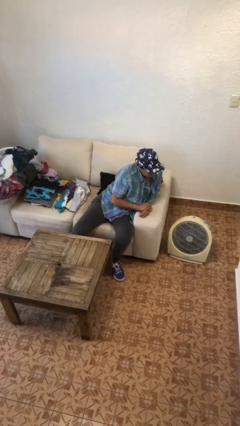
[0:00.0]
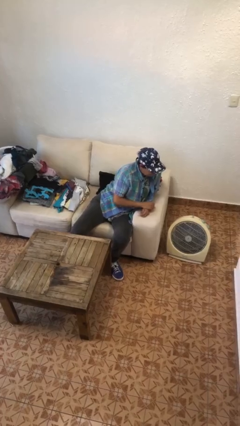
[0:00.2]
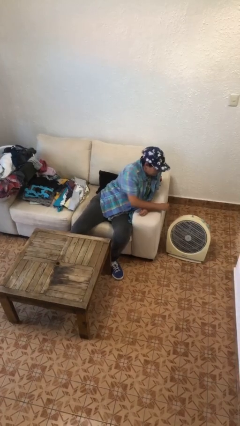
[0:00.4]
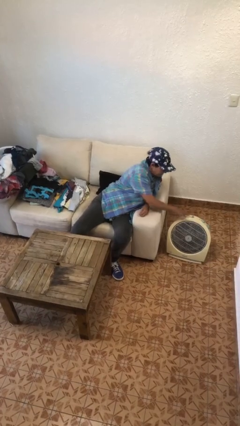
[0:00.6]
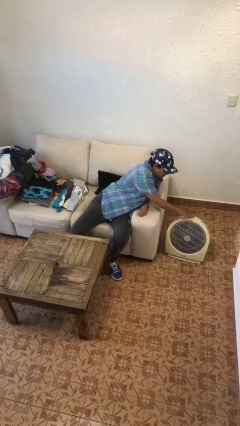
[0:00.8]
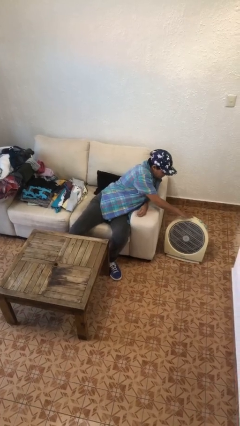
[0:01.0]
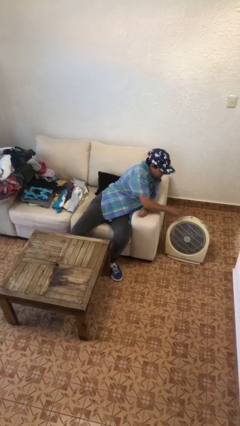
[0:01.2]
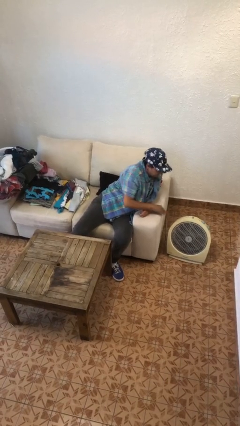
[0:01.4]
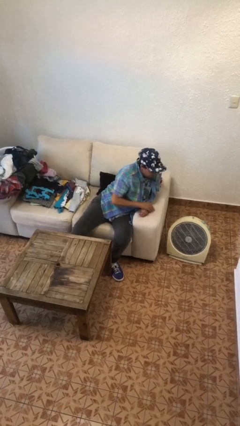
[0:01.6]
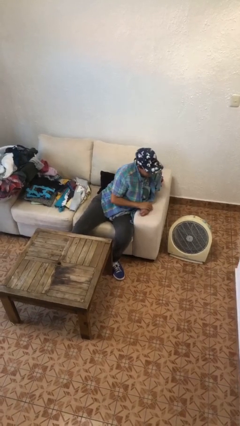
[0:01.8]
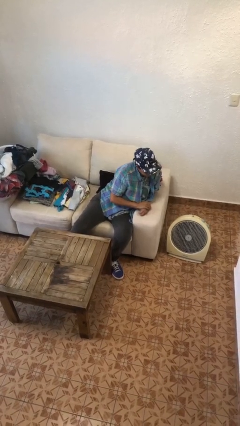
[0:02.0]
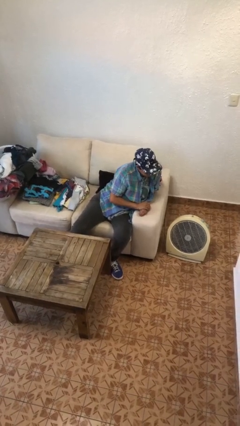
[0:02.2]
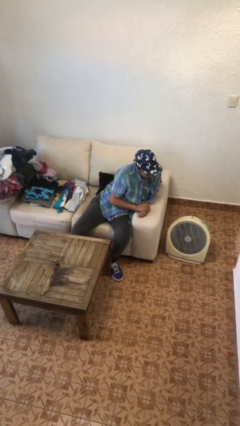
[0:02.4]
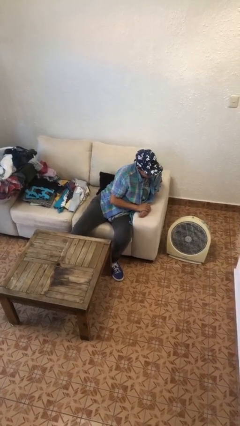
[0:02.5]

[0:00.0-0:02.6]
person turns on fan

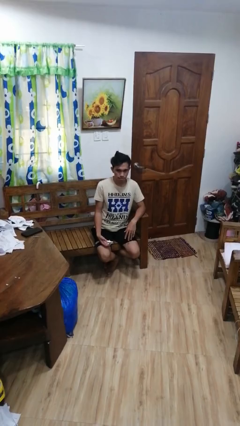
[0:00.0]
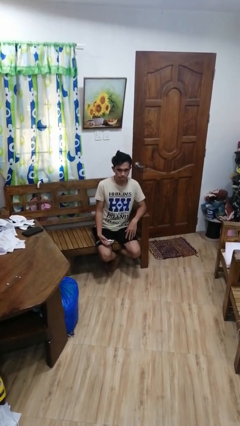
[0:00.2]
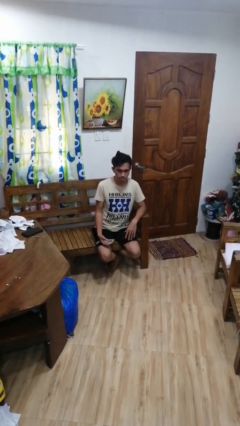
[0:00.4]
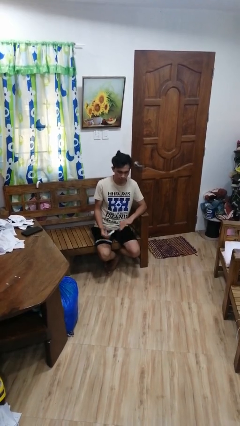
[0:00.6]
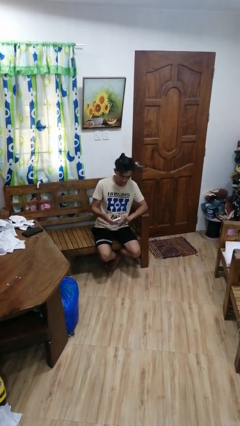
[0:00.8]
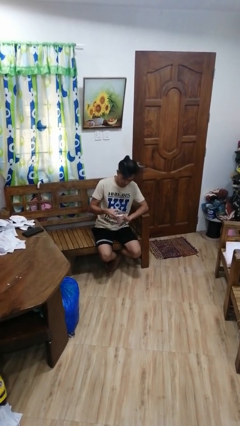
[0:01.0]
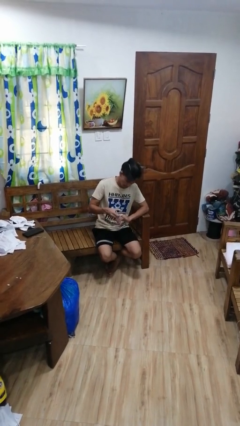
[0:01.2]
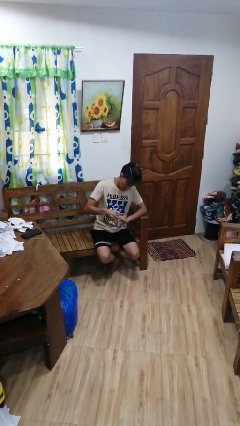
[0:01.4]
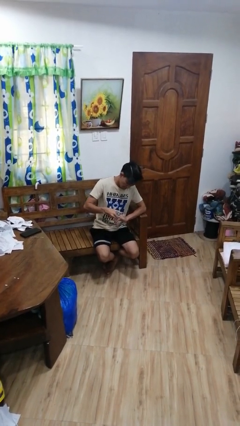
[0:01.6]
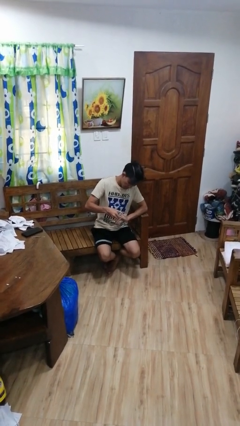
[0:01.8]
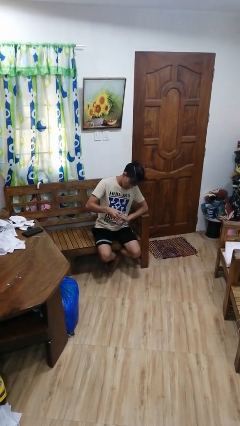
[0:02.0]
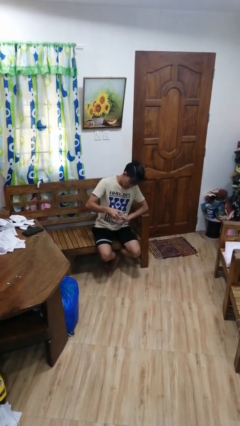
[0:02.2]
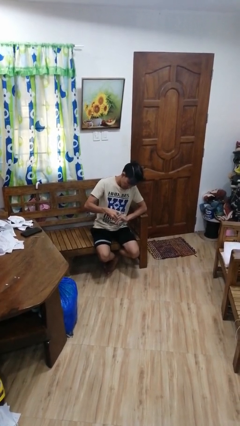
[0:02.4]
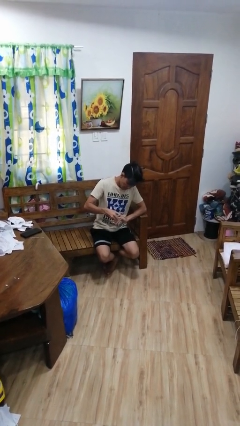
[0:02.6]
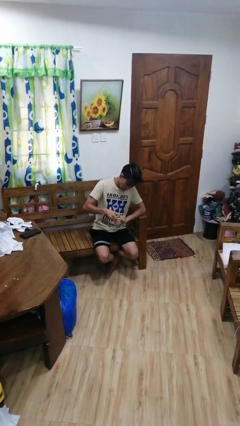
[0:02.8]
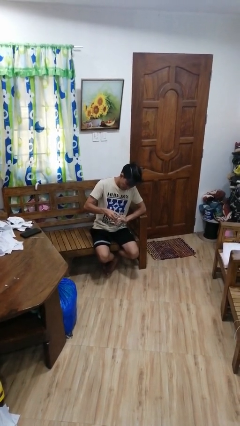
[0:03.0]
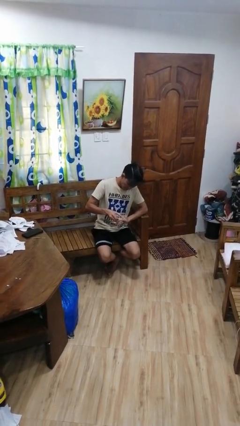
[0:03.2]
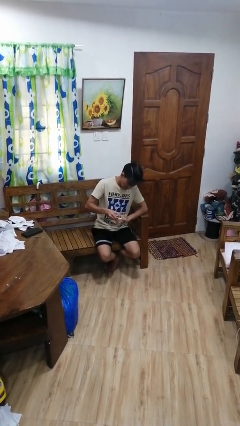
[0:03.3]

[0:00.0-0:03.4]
person clips fingernails

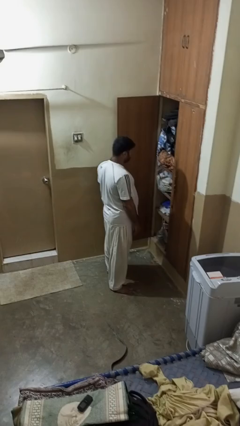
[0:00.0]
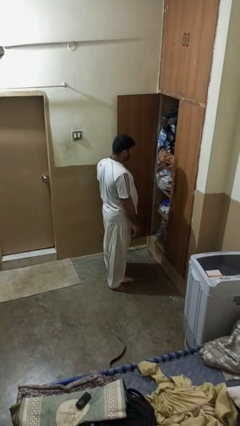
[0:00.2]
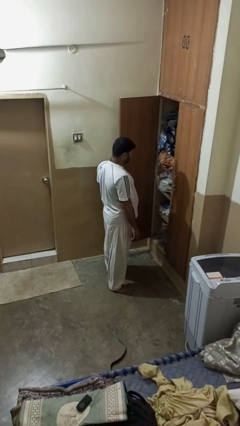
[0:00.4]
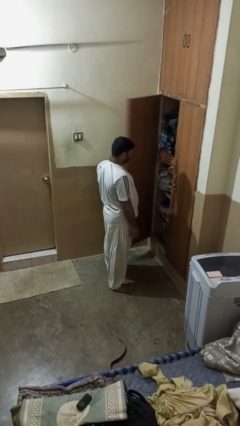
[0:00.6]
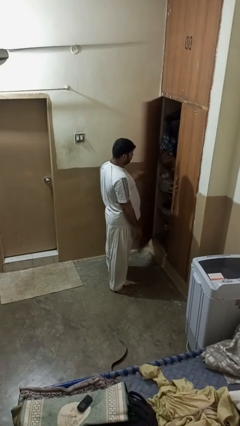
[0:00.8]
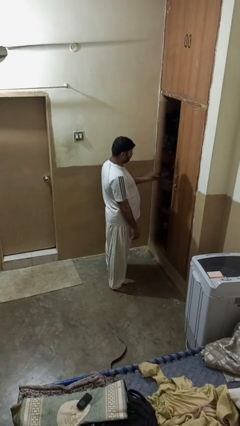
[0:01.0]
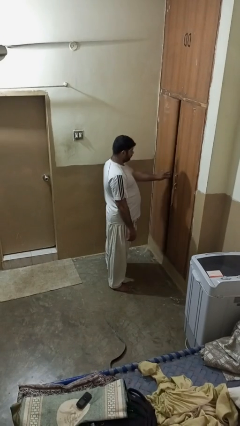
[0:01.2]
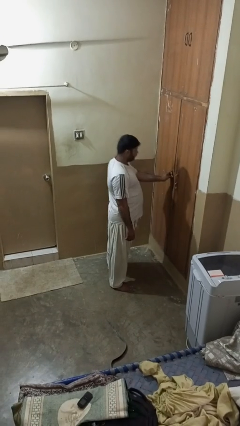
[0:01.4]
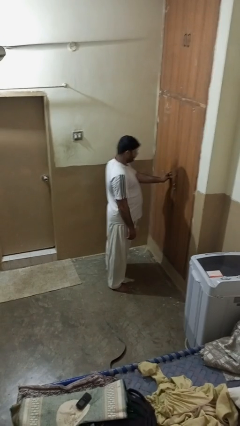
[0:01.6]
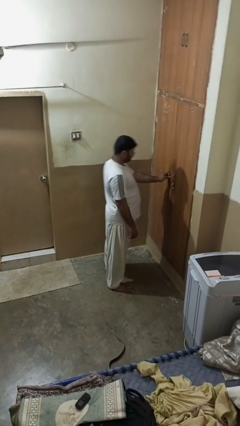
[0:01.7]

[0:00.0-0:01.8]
person closes closet door

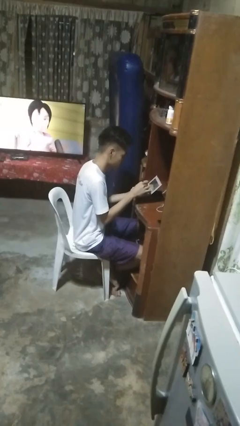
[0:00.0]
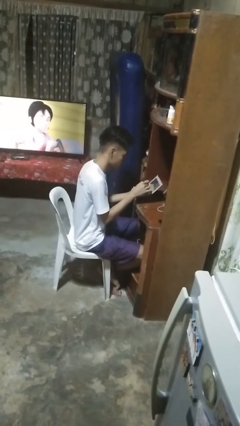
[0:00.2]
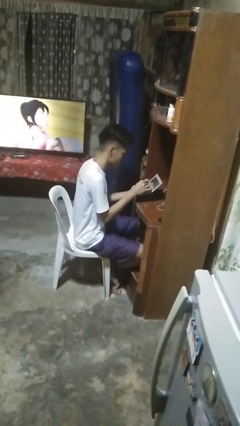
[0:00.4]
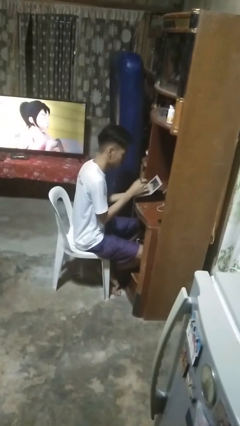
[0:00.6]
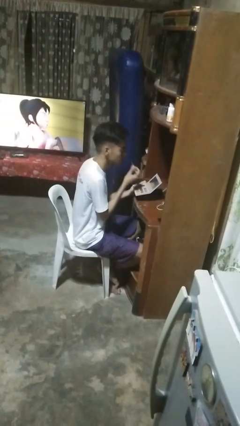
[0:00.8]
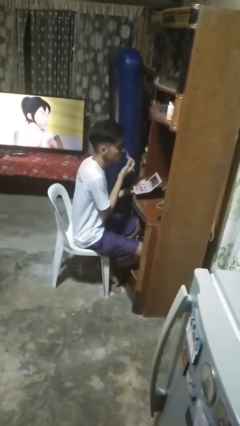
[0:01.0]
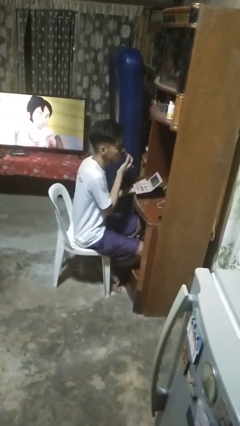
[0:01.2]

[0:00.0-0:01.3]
person applies eye makeup

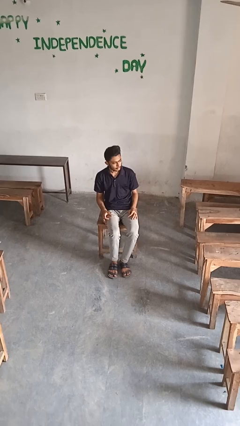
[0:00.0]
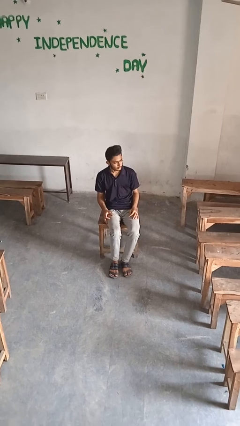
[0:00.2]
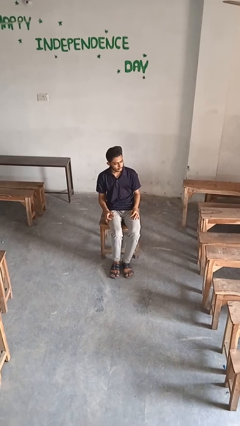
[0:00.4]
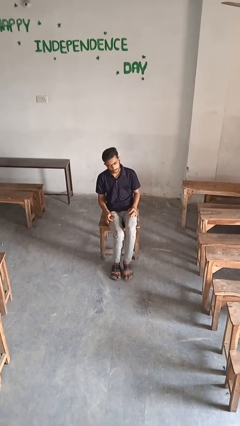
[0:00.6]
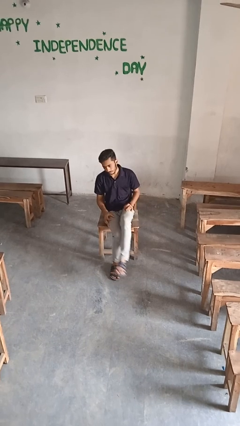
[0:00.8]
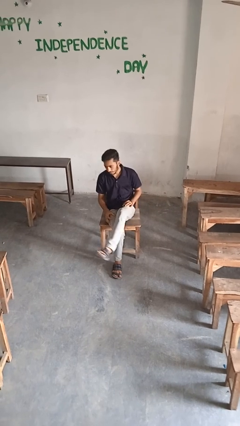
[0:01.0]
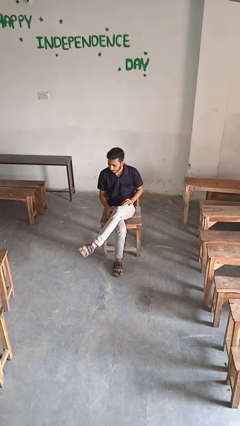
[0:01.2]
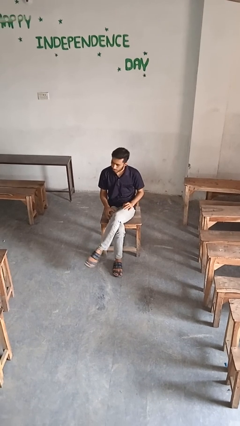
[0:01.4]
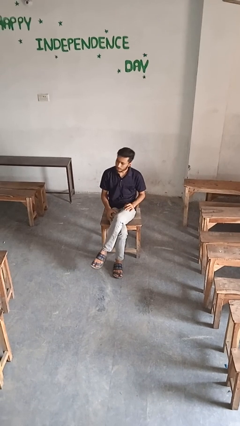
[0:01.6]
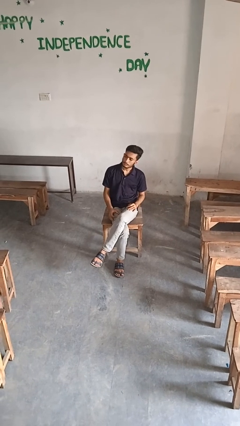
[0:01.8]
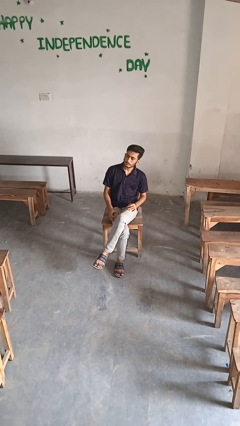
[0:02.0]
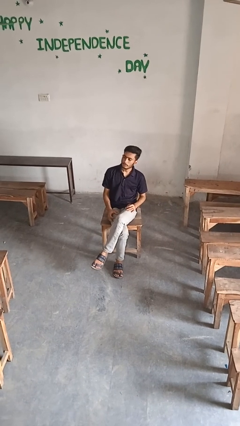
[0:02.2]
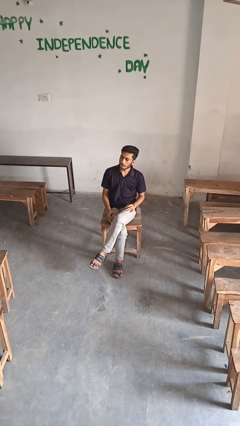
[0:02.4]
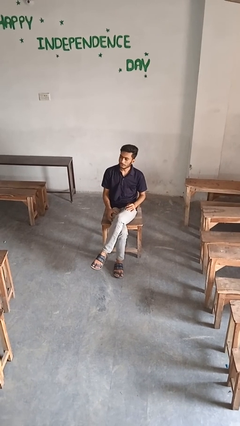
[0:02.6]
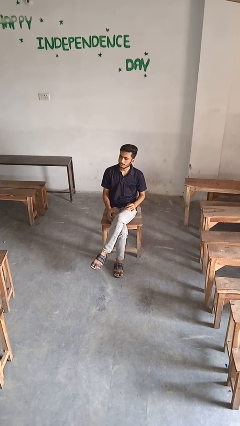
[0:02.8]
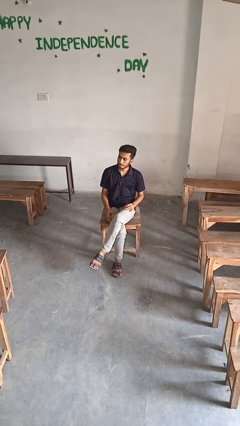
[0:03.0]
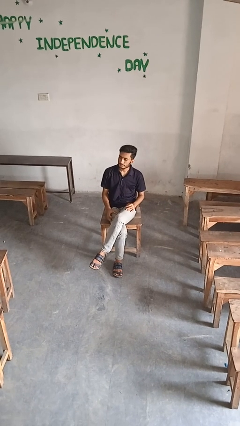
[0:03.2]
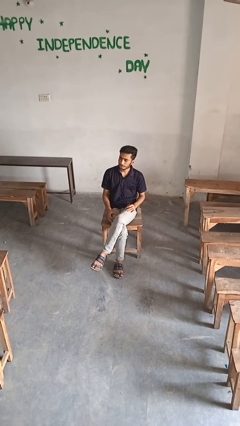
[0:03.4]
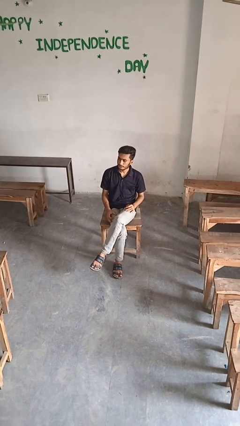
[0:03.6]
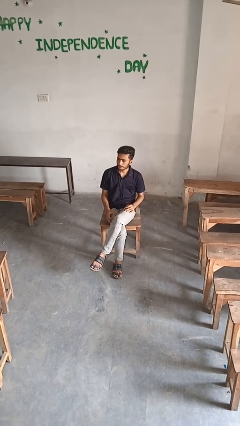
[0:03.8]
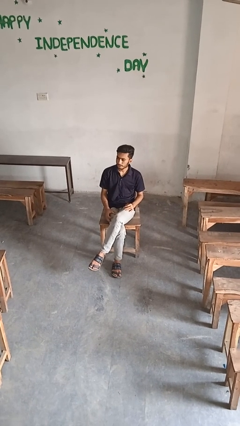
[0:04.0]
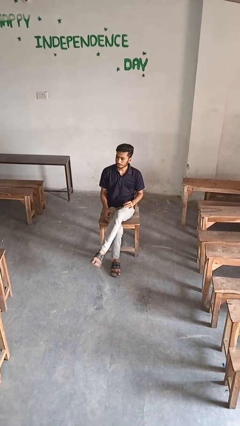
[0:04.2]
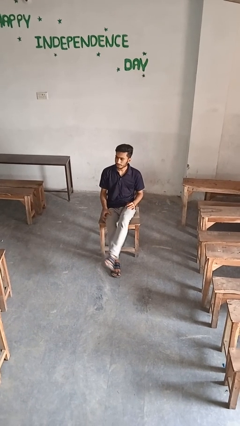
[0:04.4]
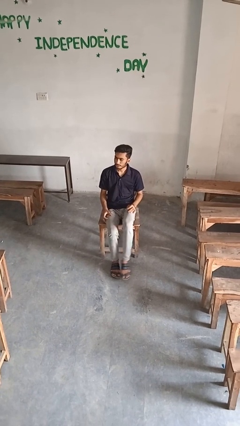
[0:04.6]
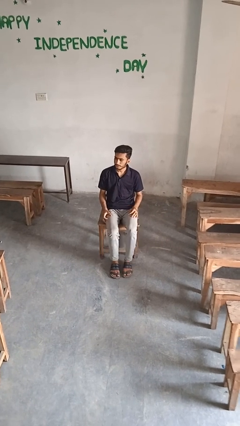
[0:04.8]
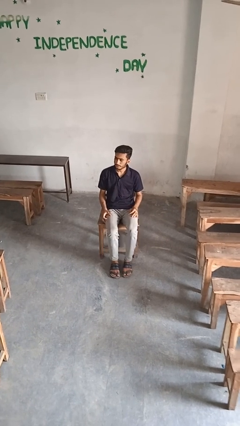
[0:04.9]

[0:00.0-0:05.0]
person crosses legs

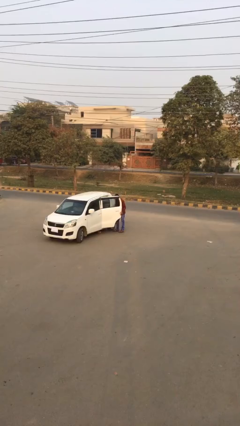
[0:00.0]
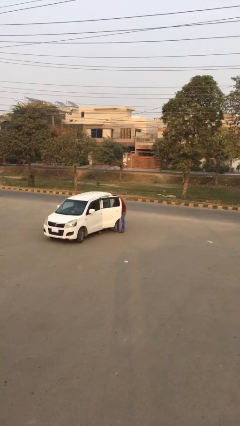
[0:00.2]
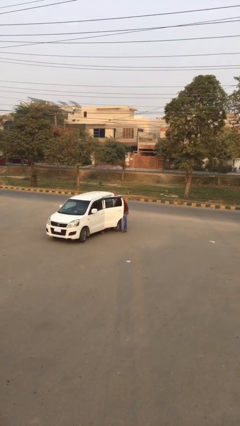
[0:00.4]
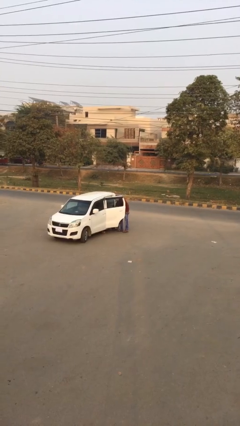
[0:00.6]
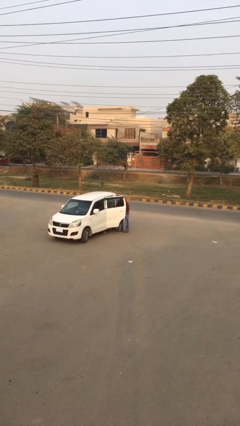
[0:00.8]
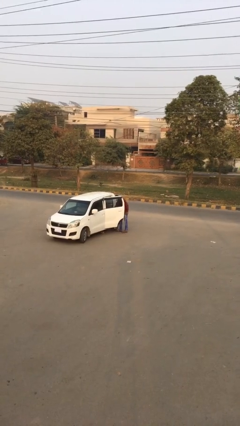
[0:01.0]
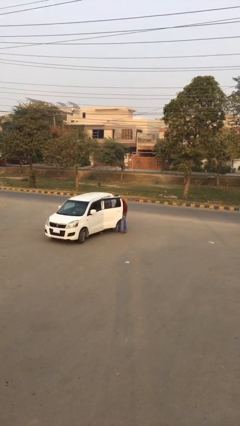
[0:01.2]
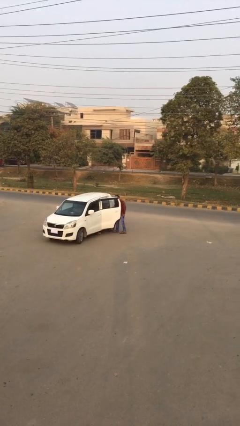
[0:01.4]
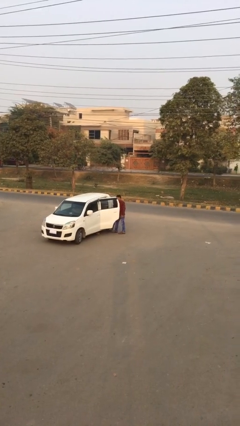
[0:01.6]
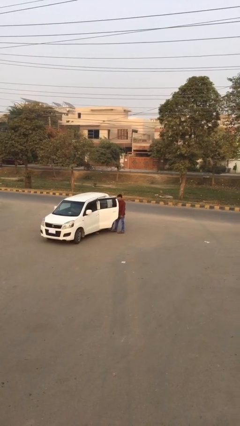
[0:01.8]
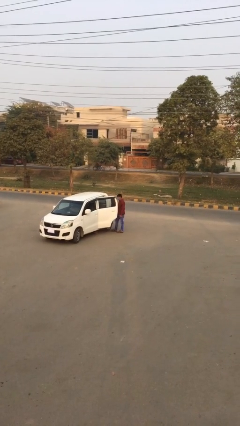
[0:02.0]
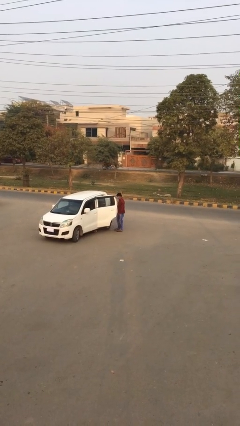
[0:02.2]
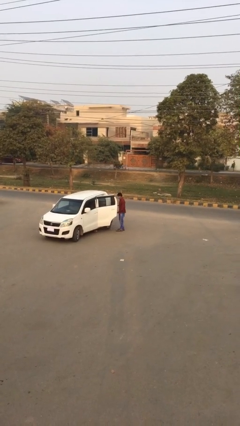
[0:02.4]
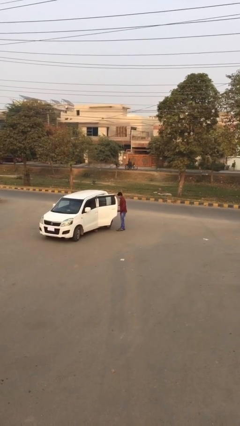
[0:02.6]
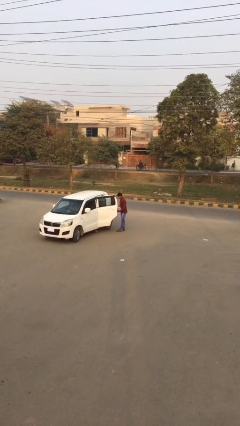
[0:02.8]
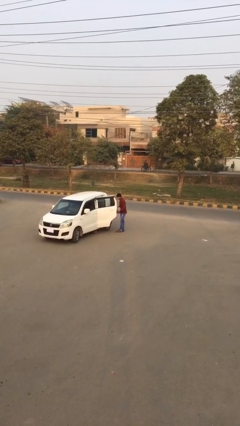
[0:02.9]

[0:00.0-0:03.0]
person unloads car

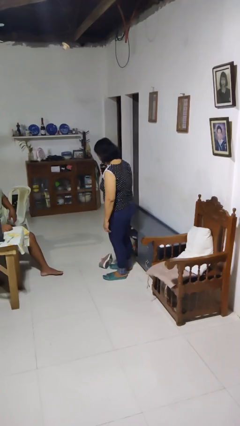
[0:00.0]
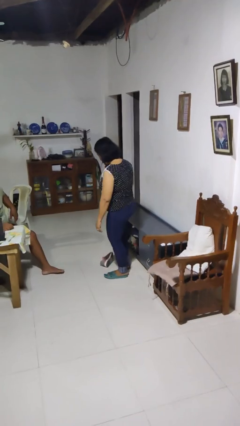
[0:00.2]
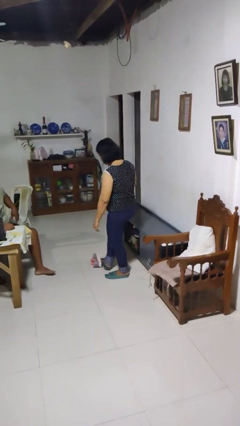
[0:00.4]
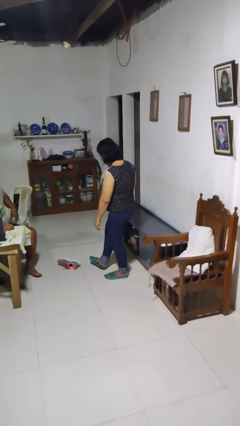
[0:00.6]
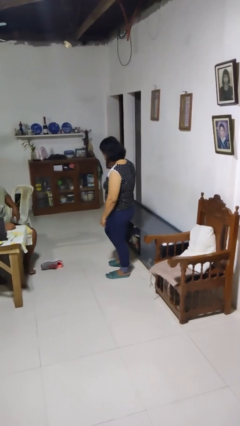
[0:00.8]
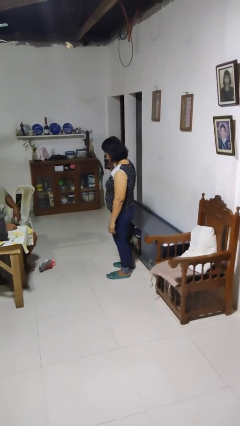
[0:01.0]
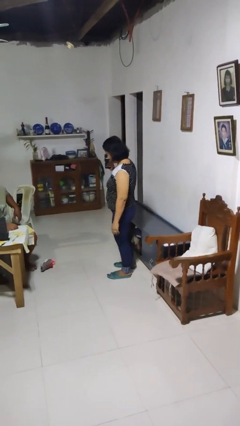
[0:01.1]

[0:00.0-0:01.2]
person kicks object to person
